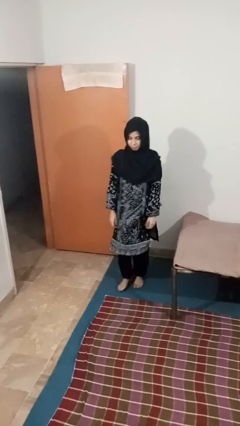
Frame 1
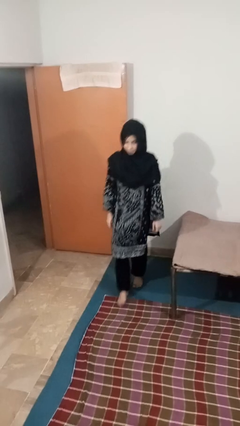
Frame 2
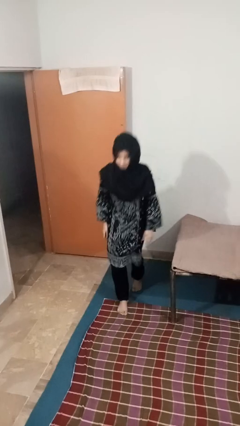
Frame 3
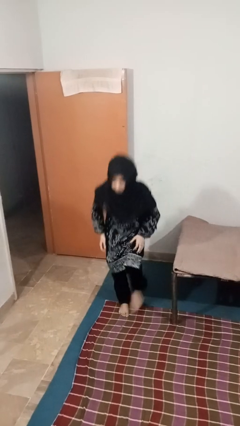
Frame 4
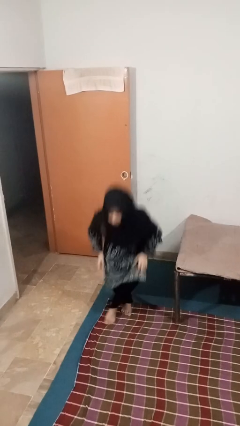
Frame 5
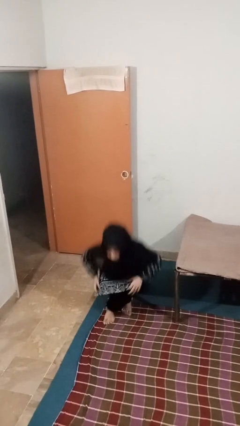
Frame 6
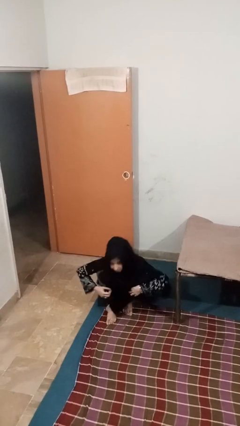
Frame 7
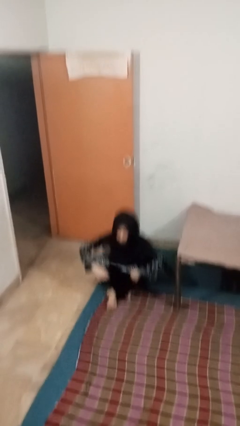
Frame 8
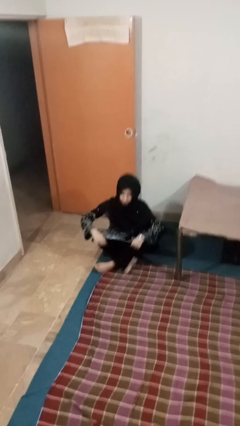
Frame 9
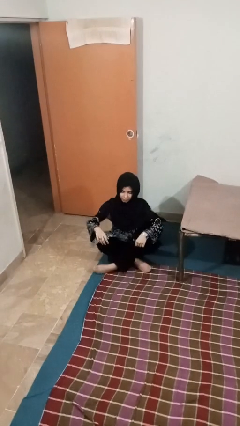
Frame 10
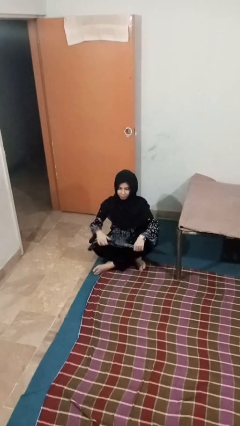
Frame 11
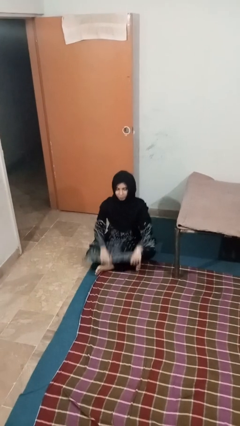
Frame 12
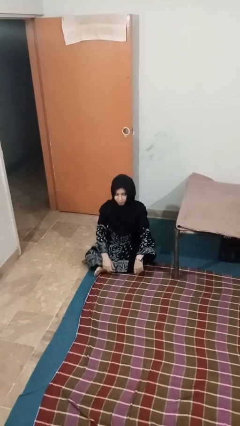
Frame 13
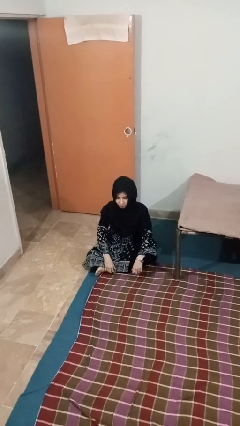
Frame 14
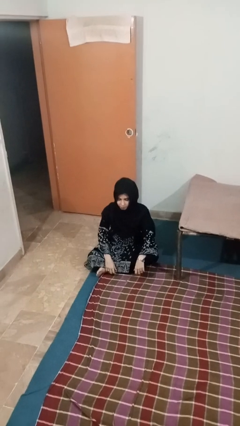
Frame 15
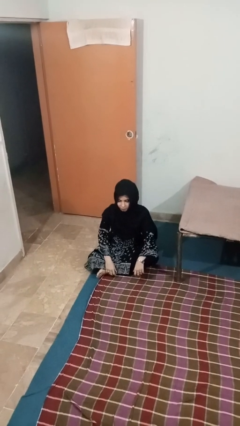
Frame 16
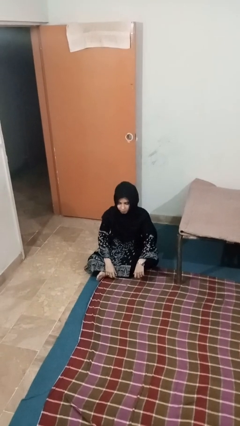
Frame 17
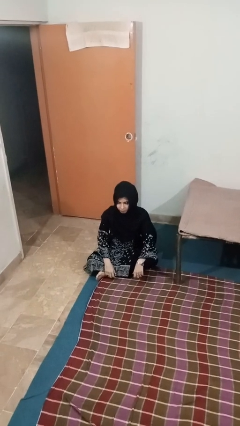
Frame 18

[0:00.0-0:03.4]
person sits crisscross

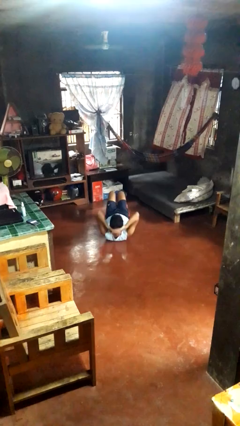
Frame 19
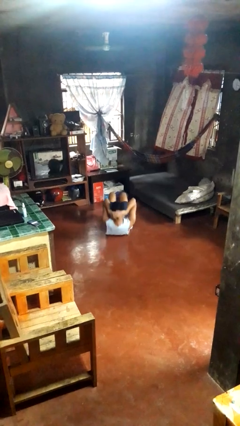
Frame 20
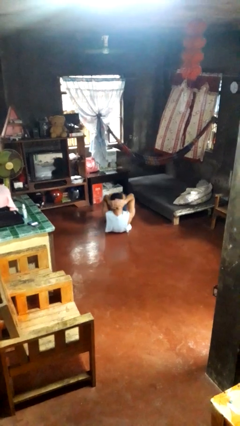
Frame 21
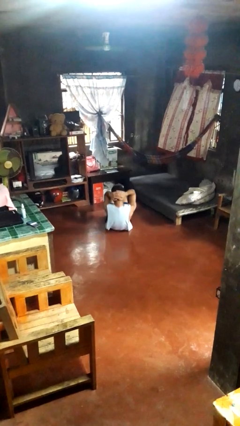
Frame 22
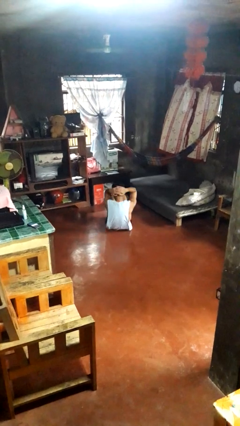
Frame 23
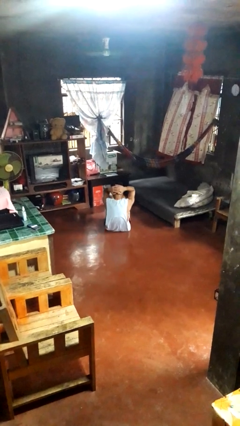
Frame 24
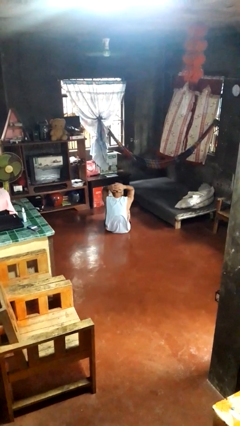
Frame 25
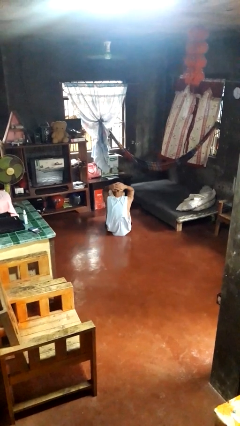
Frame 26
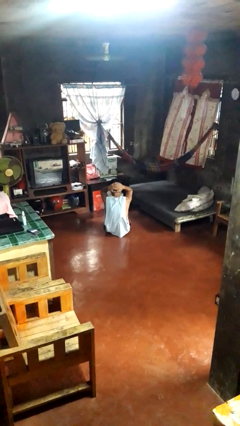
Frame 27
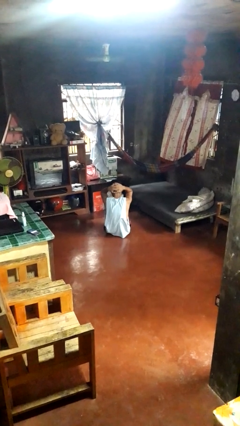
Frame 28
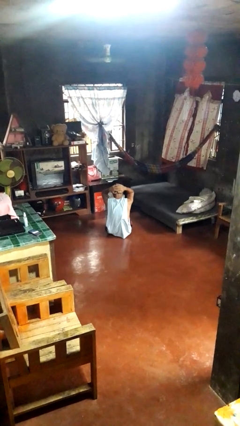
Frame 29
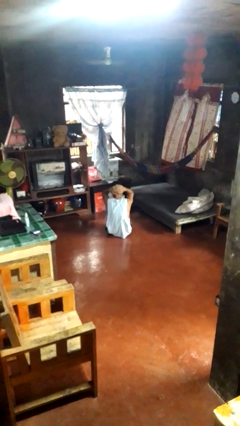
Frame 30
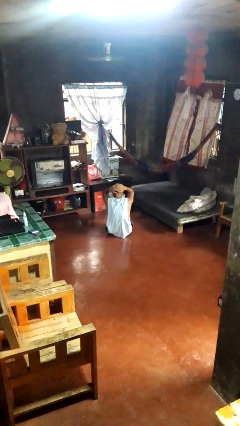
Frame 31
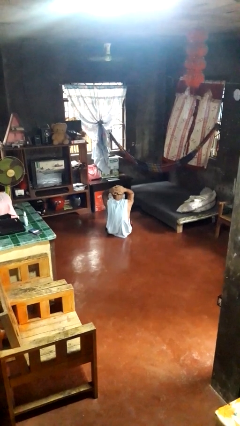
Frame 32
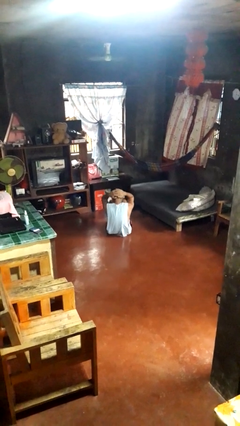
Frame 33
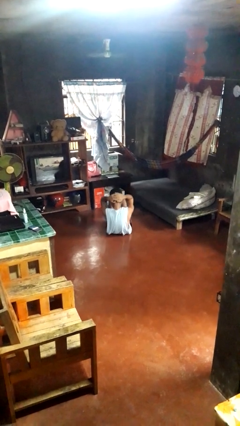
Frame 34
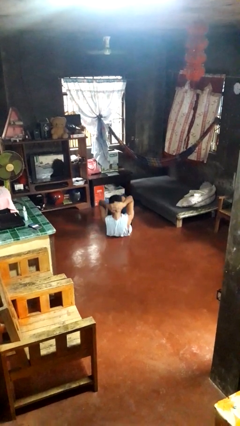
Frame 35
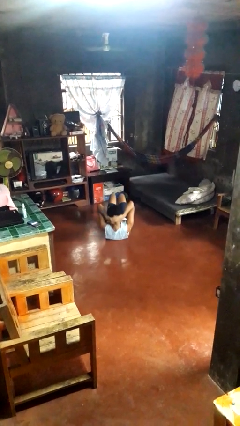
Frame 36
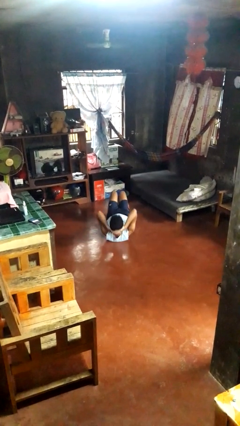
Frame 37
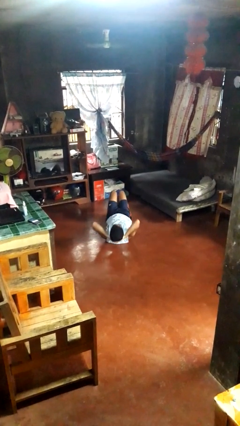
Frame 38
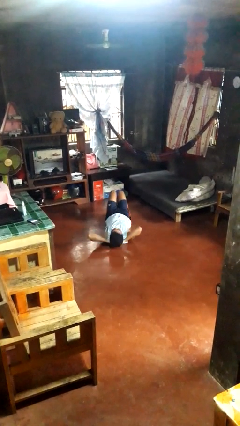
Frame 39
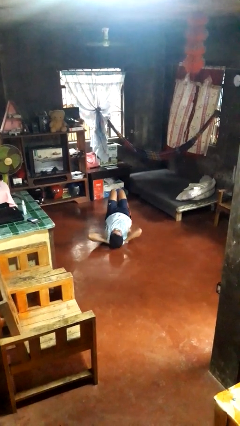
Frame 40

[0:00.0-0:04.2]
person exercises with situp

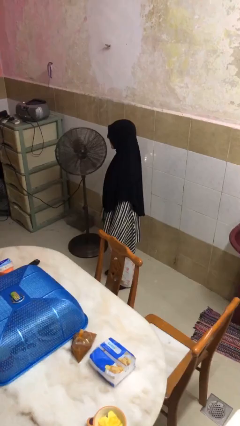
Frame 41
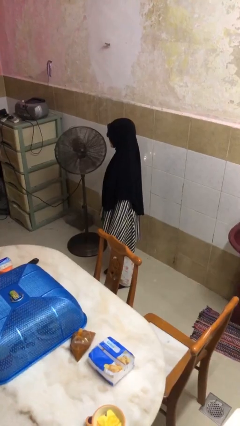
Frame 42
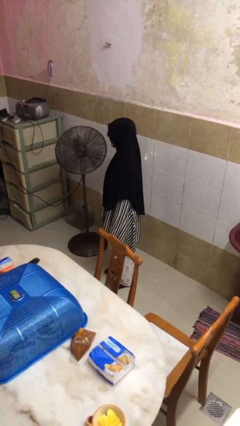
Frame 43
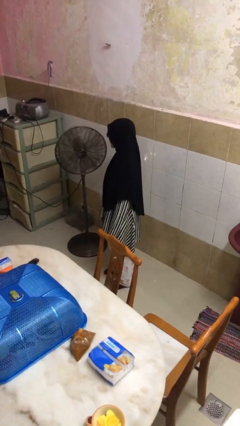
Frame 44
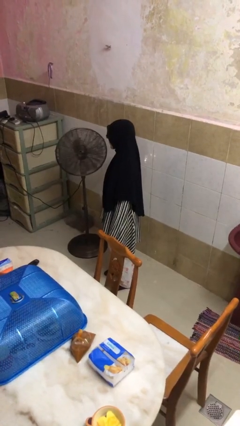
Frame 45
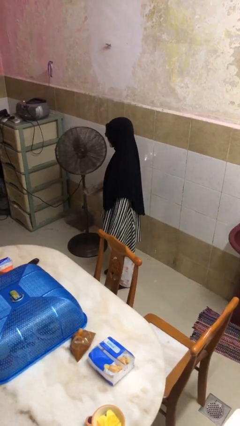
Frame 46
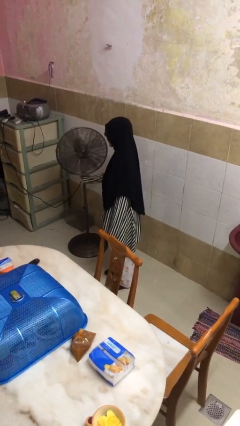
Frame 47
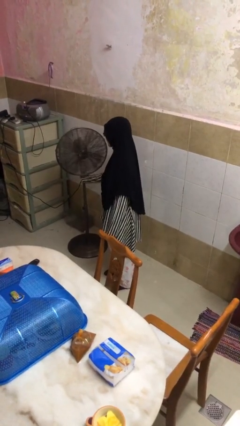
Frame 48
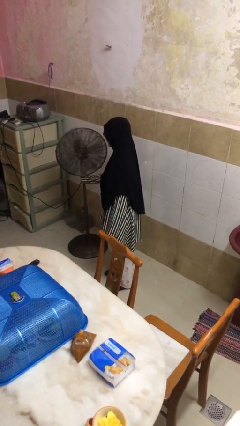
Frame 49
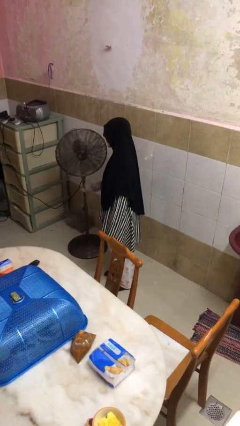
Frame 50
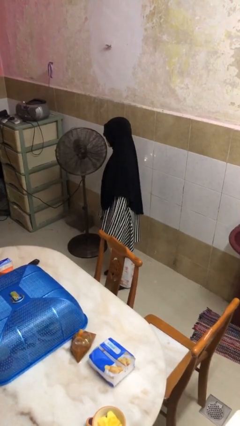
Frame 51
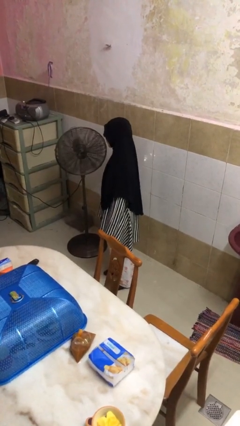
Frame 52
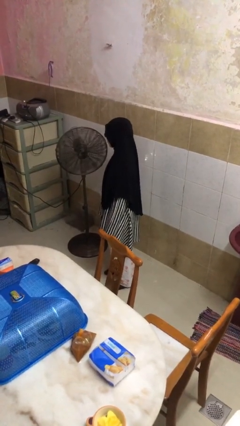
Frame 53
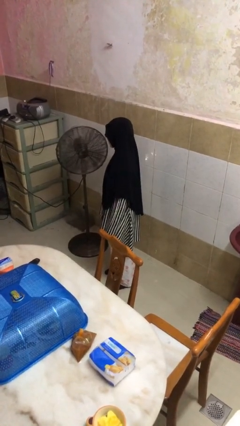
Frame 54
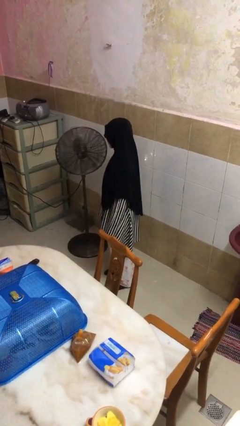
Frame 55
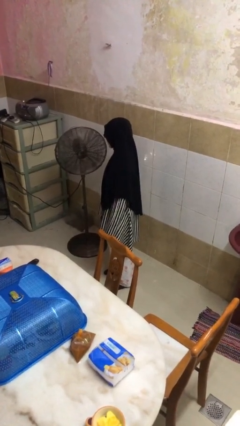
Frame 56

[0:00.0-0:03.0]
person turns on fan

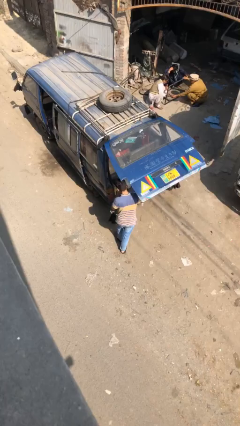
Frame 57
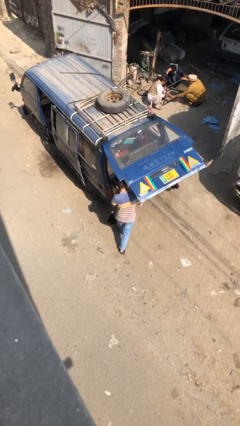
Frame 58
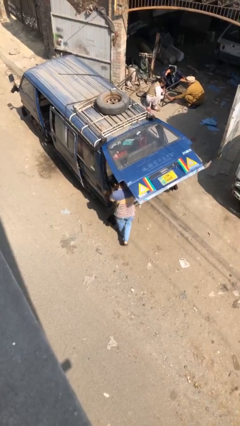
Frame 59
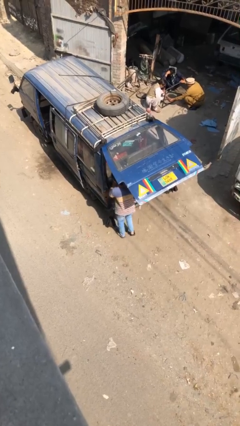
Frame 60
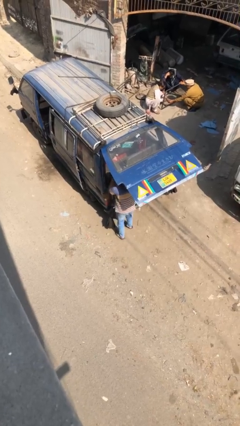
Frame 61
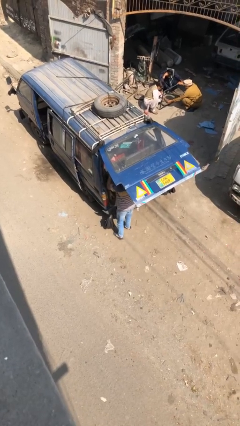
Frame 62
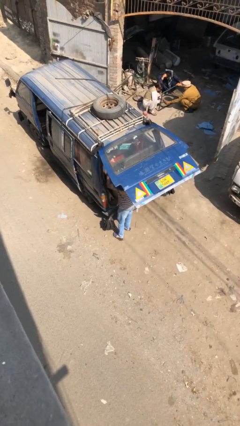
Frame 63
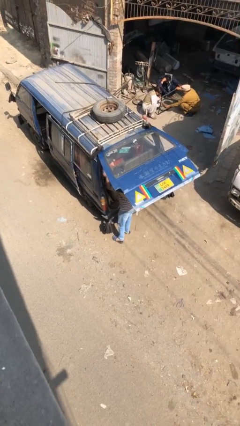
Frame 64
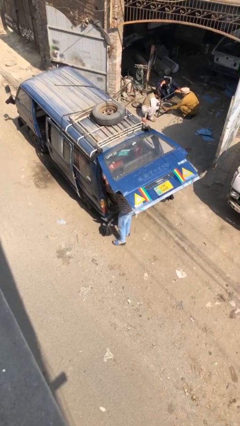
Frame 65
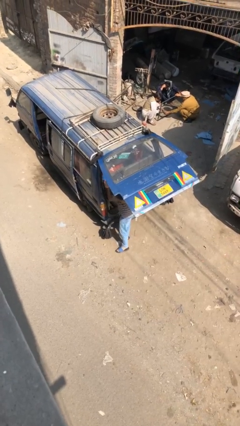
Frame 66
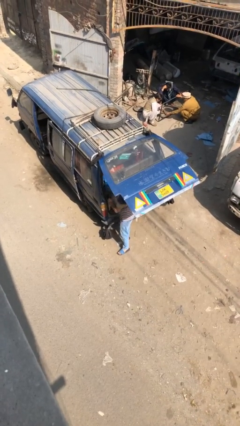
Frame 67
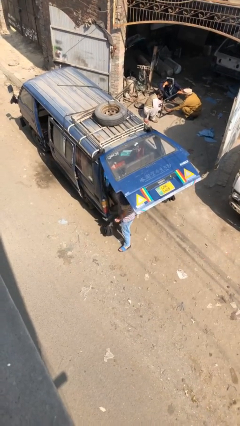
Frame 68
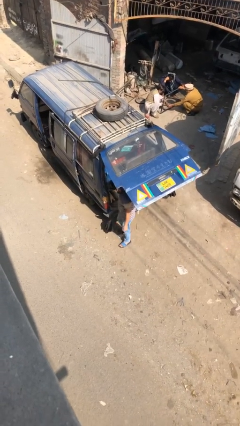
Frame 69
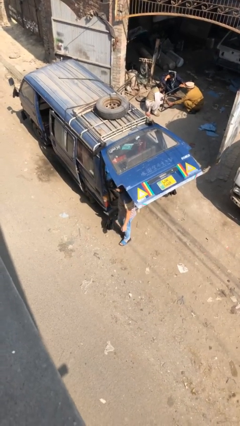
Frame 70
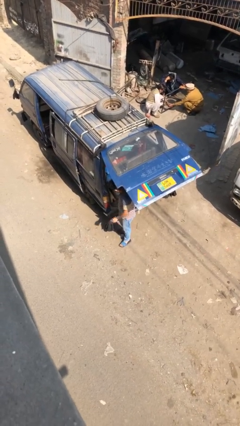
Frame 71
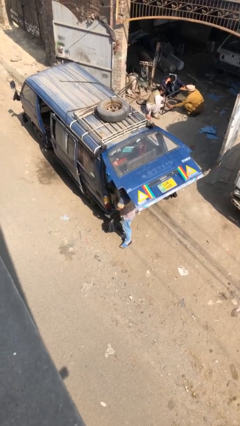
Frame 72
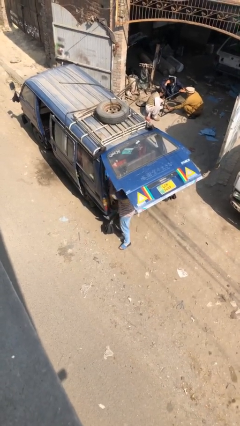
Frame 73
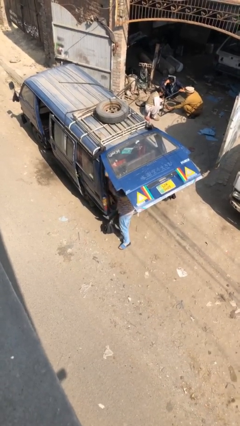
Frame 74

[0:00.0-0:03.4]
person loads car

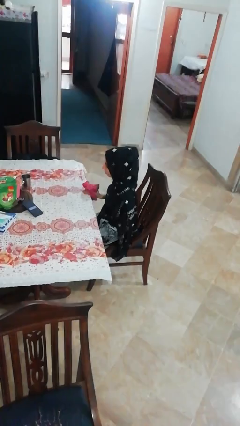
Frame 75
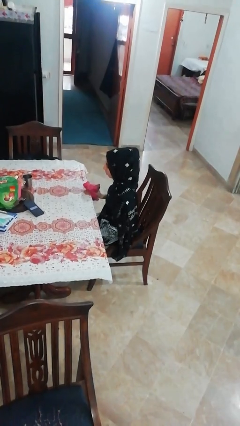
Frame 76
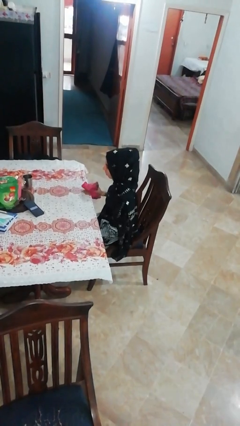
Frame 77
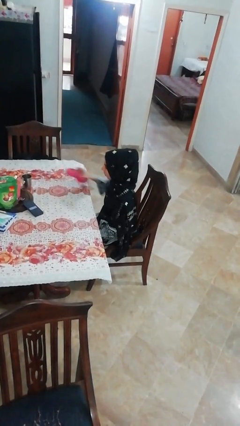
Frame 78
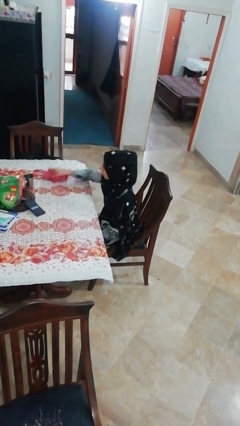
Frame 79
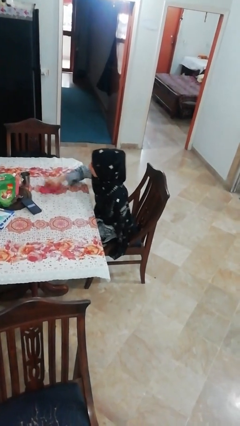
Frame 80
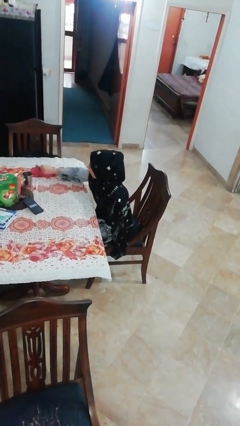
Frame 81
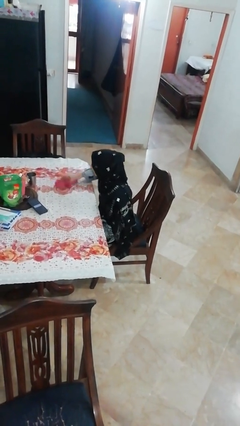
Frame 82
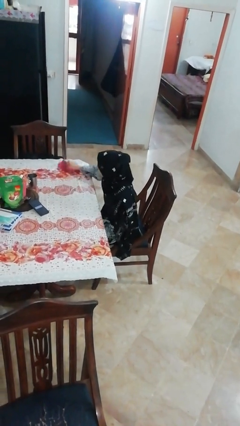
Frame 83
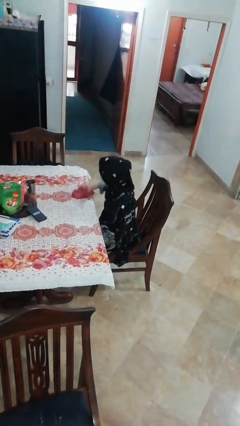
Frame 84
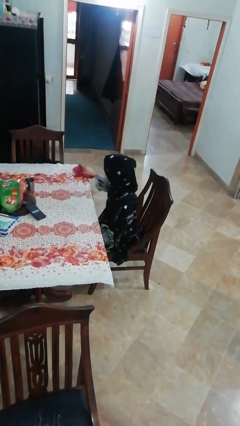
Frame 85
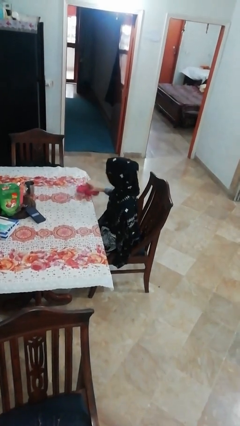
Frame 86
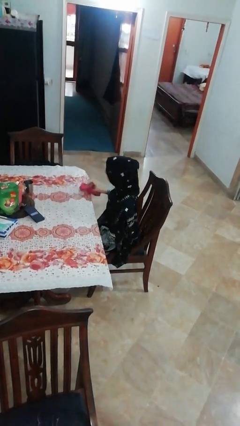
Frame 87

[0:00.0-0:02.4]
person cleans table with rag

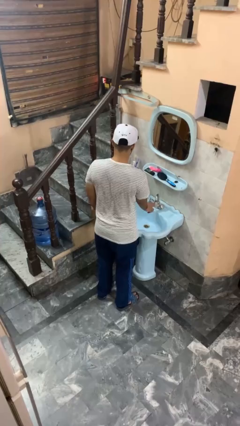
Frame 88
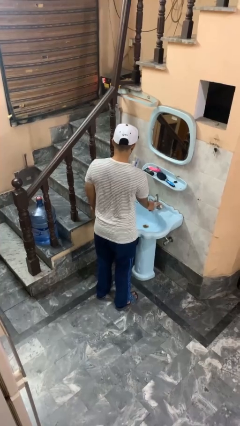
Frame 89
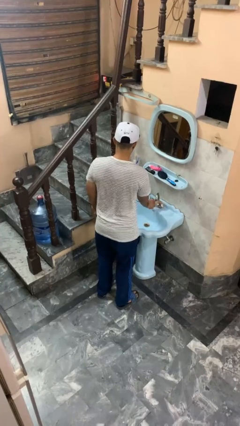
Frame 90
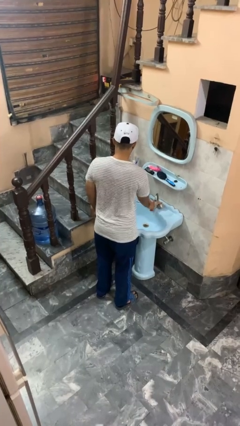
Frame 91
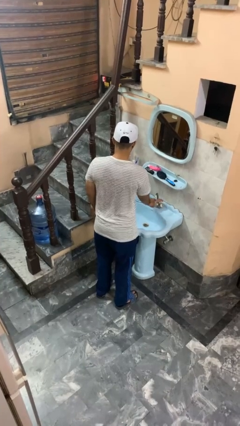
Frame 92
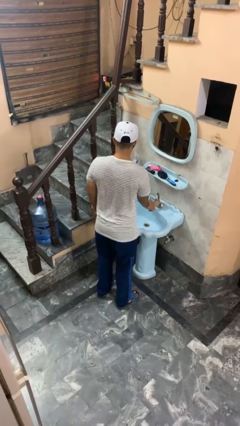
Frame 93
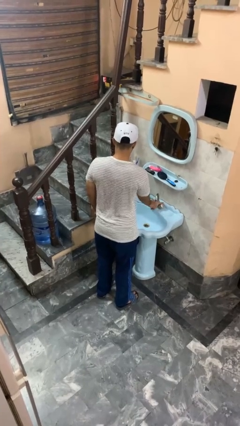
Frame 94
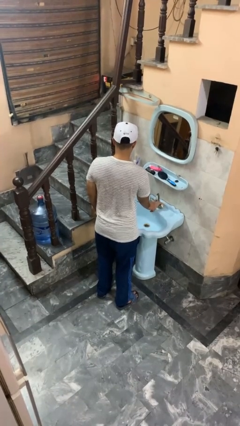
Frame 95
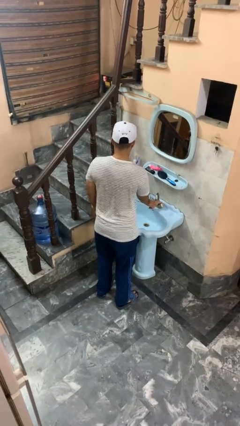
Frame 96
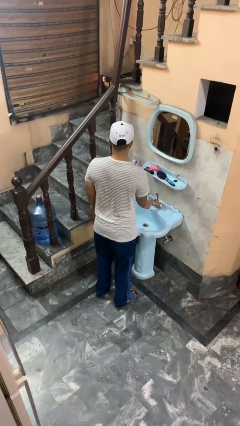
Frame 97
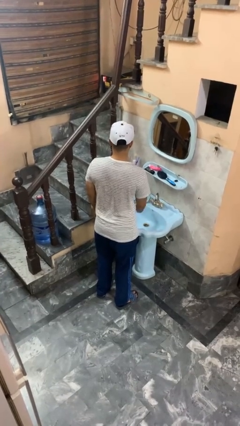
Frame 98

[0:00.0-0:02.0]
person turns off faucet
